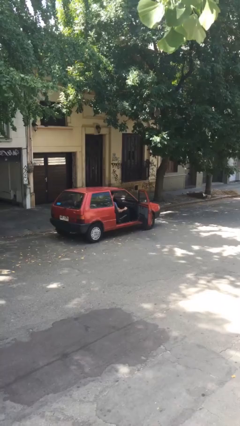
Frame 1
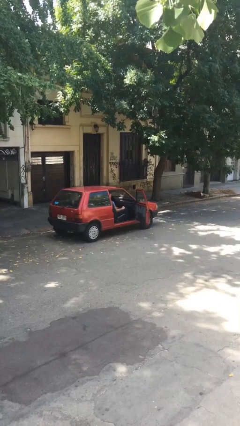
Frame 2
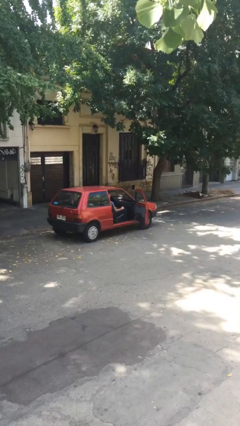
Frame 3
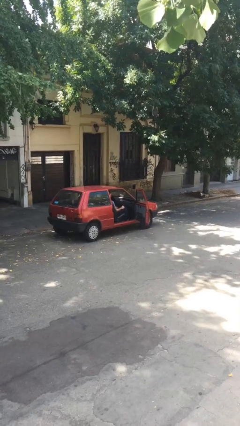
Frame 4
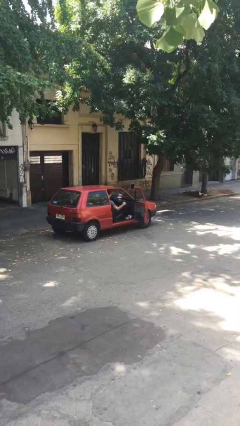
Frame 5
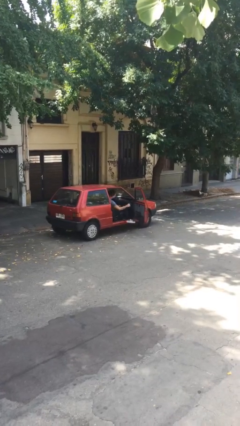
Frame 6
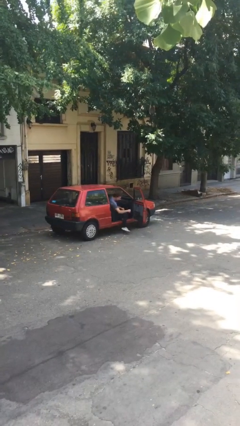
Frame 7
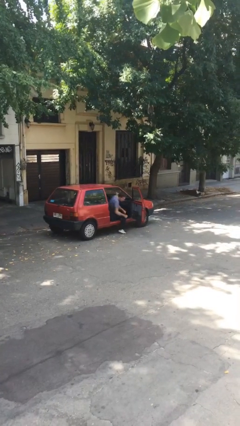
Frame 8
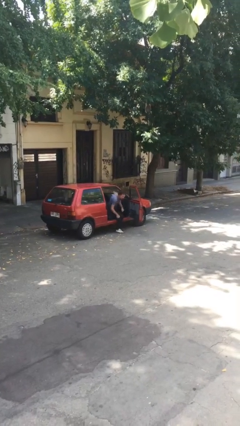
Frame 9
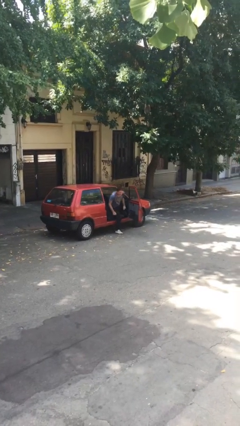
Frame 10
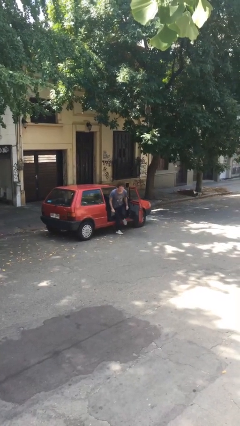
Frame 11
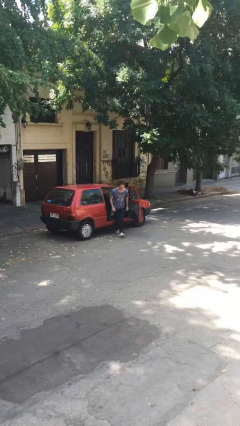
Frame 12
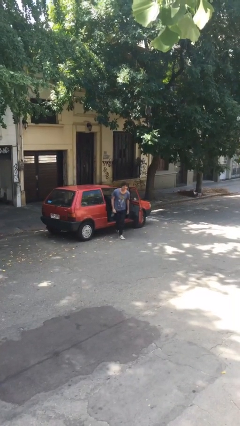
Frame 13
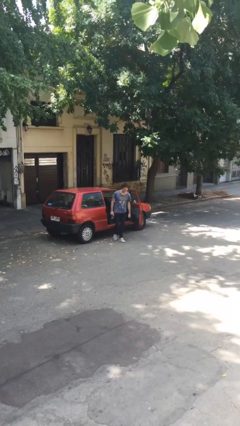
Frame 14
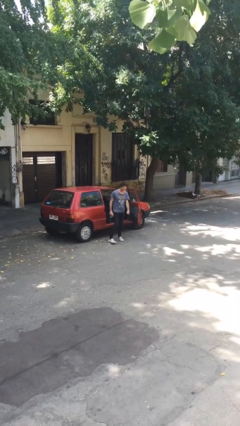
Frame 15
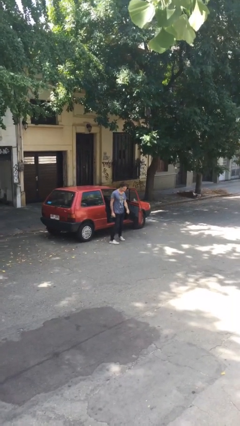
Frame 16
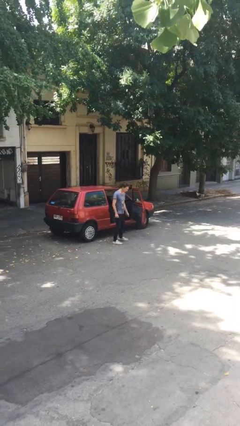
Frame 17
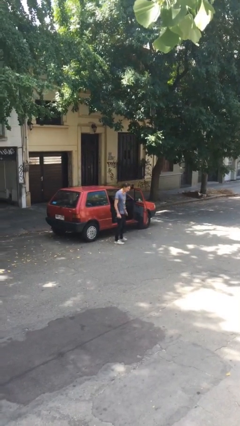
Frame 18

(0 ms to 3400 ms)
person exits car

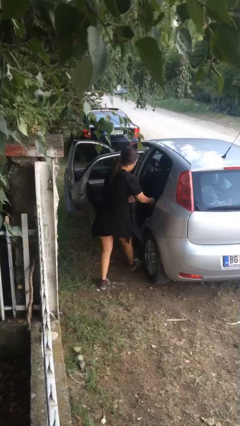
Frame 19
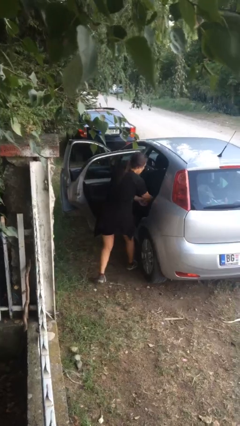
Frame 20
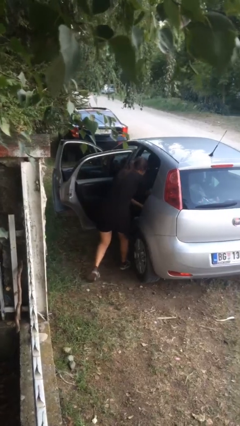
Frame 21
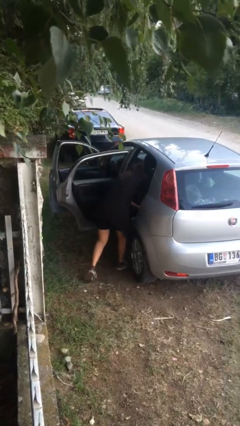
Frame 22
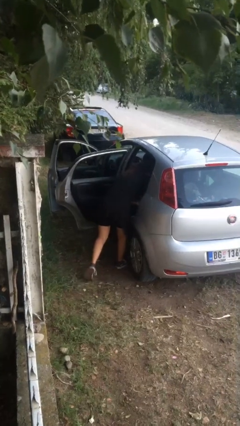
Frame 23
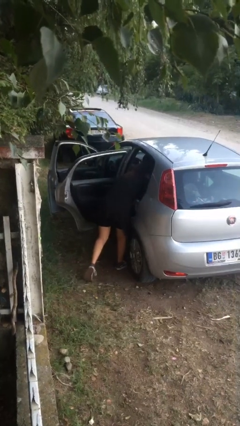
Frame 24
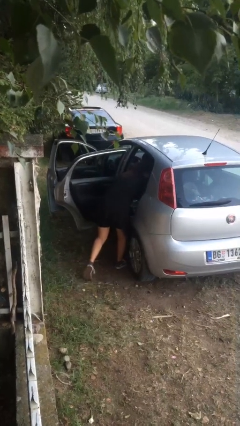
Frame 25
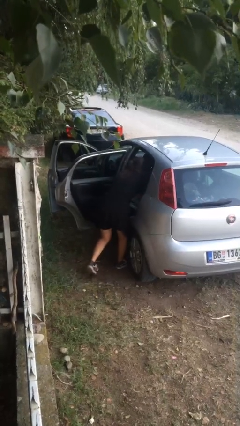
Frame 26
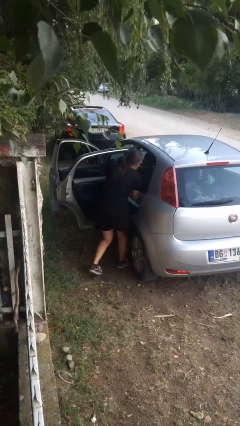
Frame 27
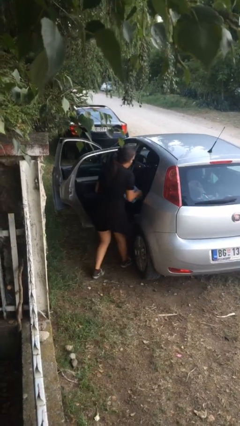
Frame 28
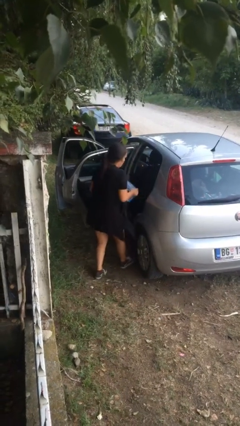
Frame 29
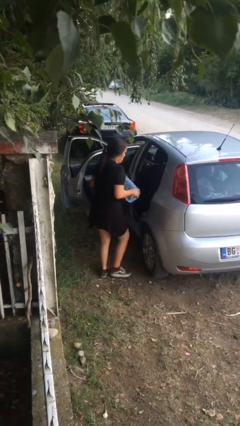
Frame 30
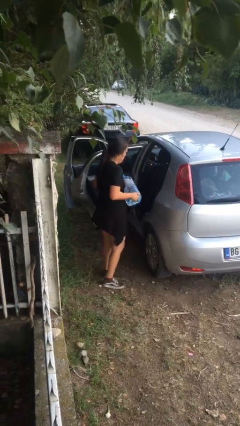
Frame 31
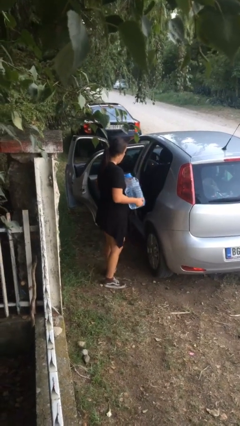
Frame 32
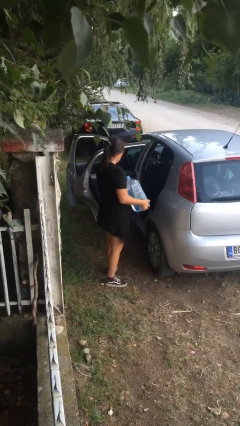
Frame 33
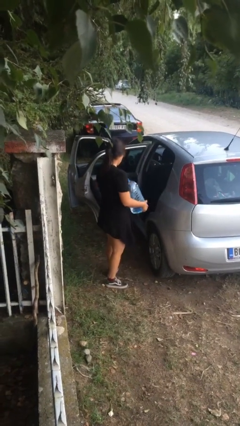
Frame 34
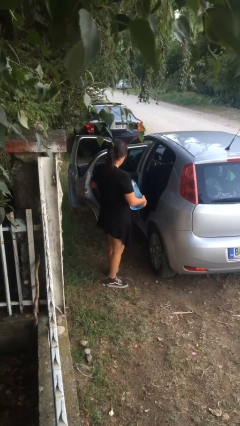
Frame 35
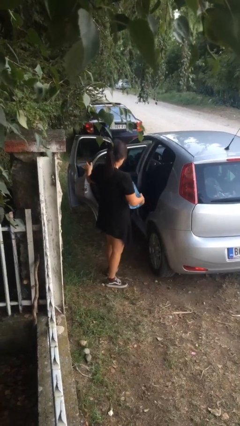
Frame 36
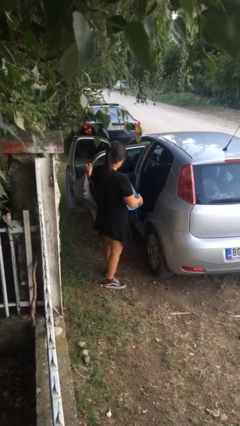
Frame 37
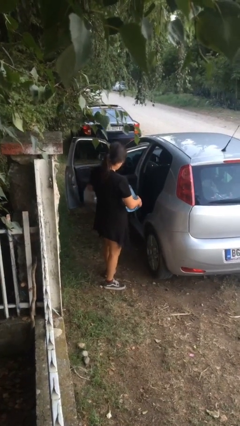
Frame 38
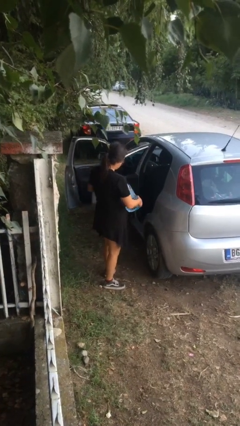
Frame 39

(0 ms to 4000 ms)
person unloads car

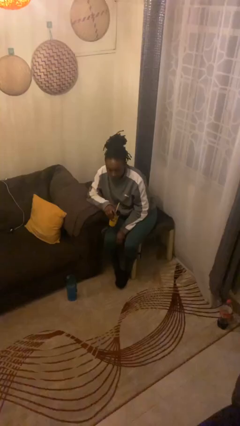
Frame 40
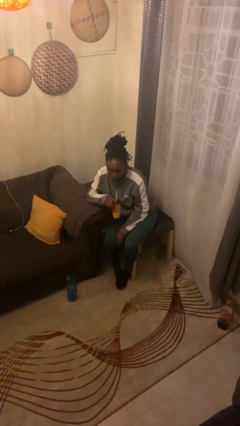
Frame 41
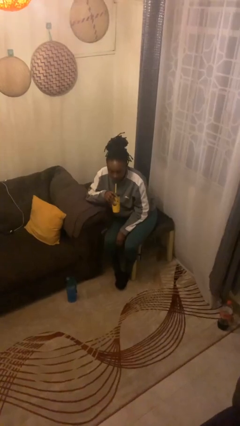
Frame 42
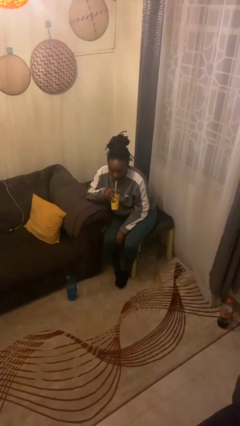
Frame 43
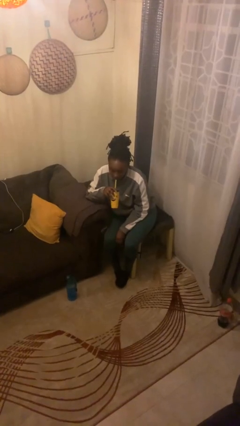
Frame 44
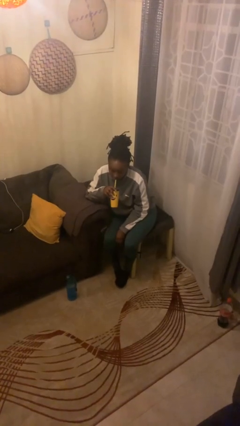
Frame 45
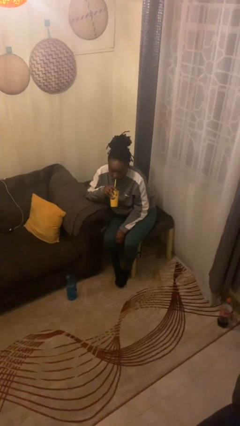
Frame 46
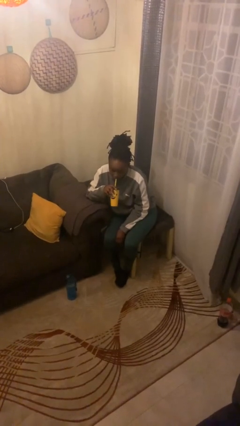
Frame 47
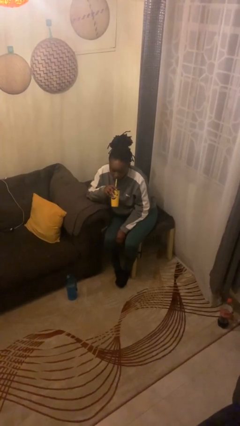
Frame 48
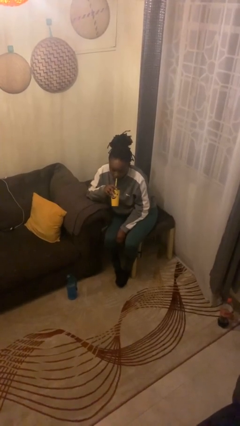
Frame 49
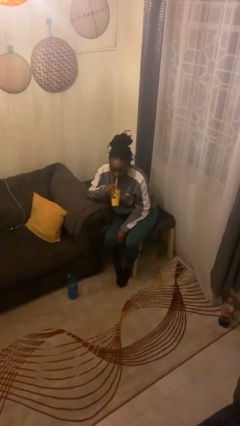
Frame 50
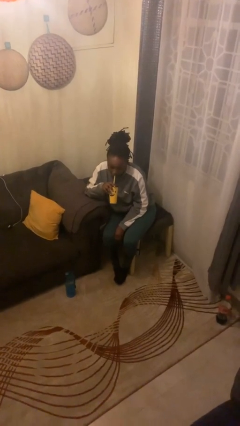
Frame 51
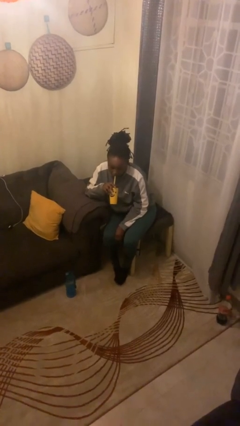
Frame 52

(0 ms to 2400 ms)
person drinks from straw

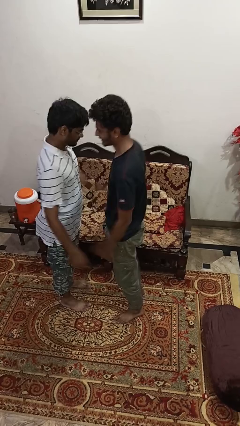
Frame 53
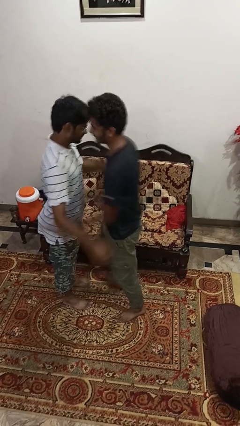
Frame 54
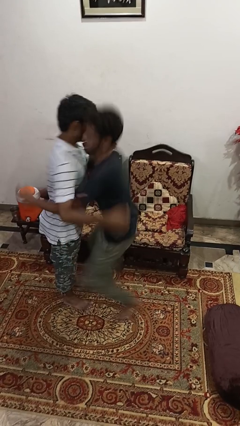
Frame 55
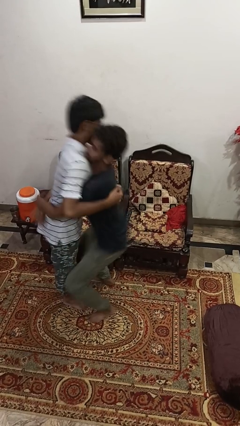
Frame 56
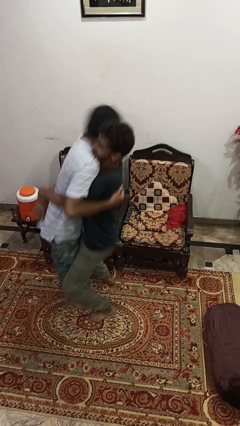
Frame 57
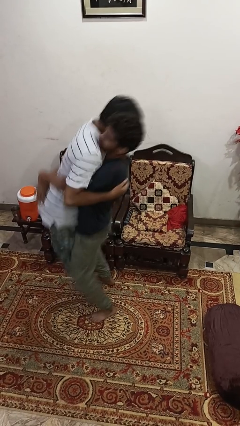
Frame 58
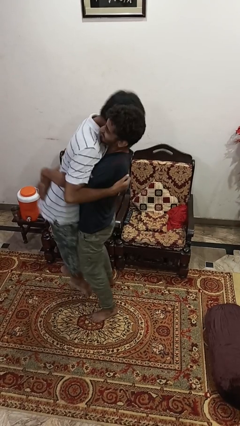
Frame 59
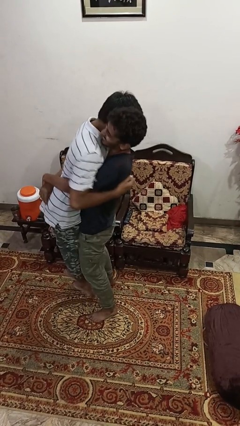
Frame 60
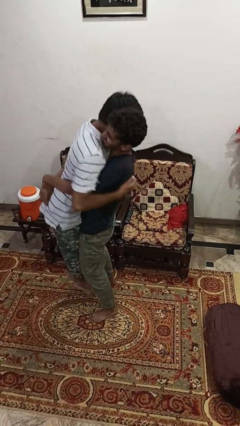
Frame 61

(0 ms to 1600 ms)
person picks up person

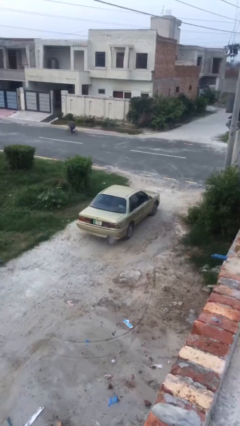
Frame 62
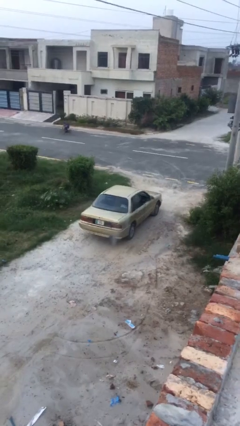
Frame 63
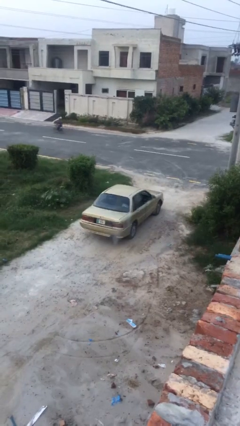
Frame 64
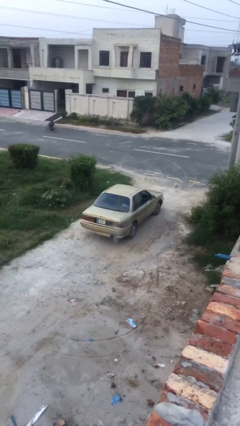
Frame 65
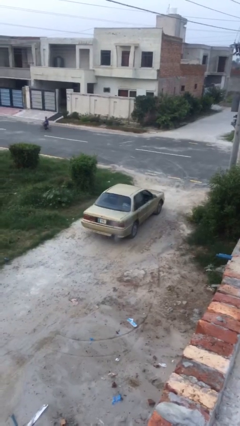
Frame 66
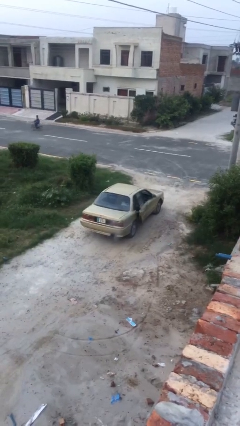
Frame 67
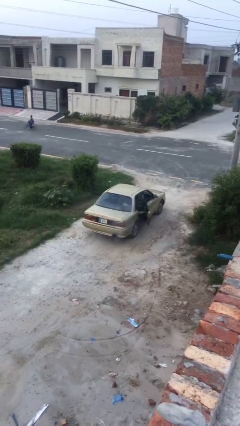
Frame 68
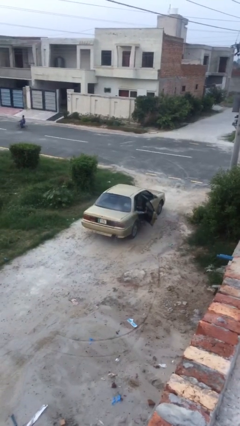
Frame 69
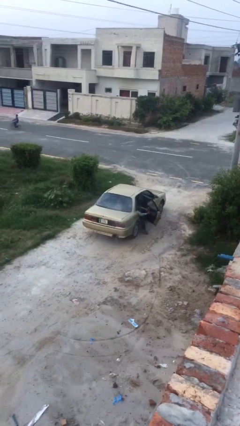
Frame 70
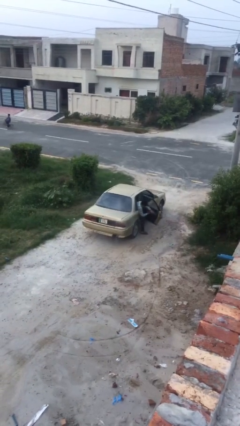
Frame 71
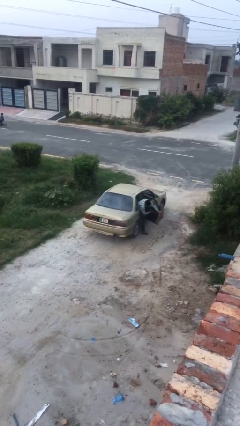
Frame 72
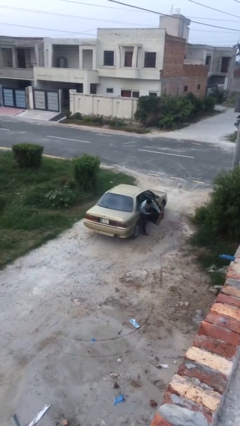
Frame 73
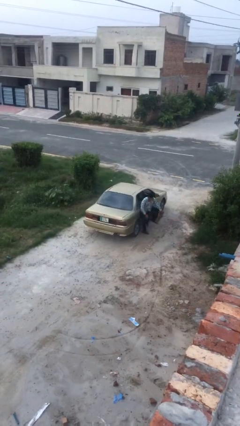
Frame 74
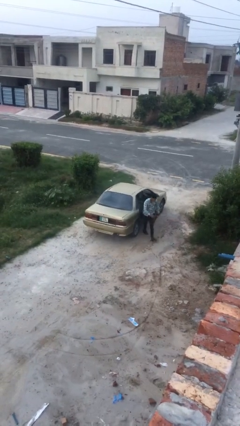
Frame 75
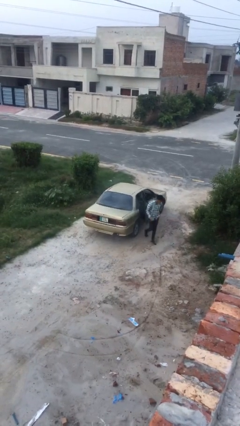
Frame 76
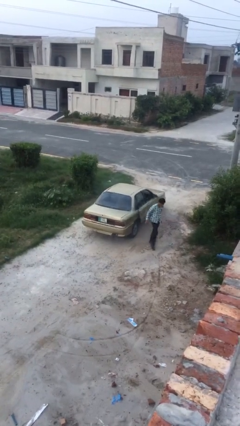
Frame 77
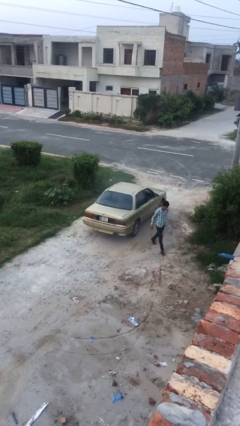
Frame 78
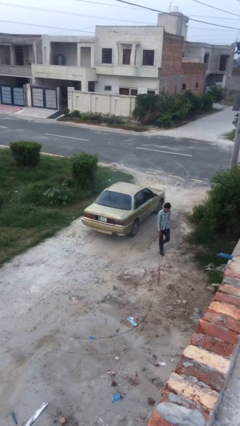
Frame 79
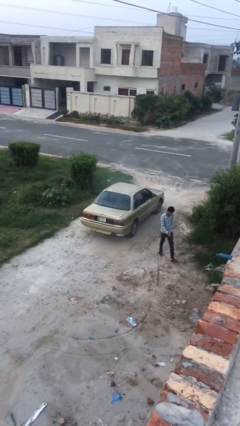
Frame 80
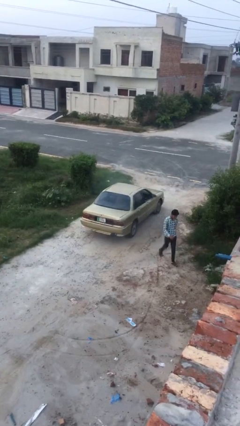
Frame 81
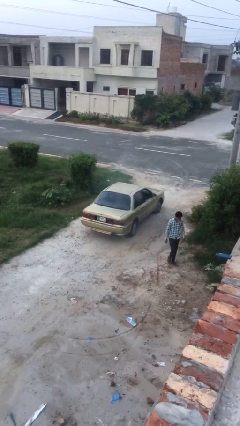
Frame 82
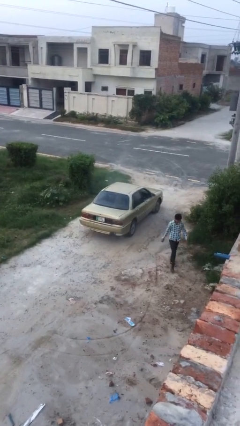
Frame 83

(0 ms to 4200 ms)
car drops off person

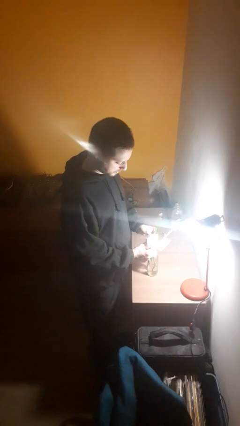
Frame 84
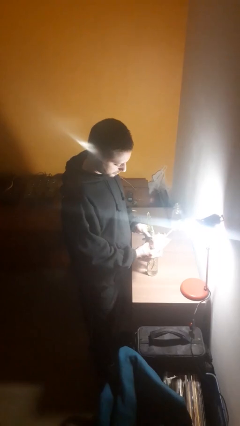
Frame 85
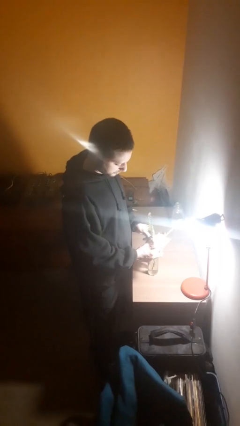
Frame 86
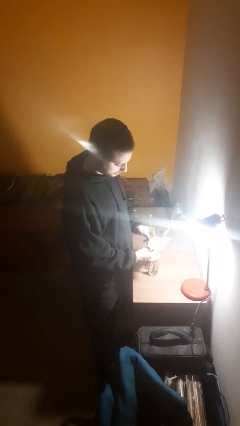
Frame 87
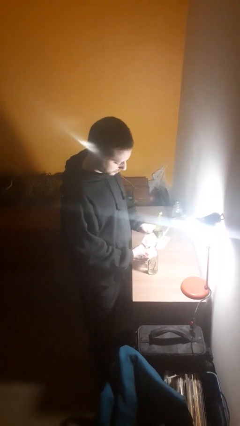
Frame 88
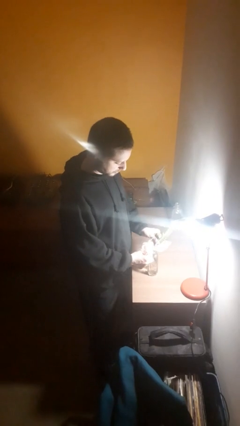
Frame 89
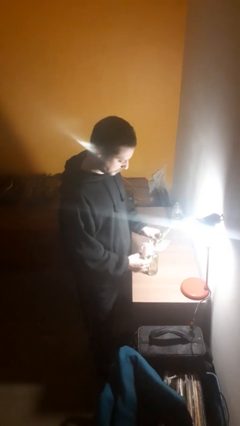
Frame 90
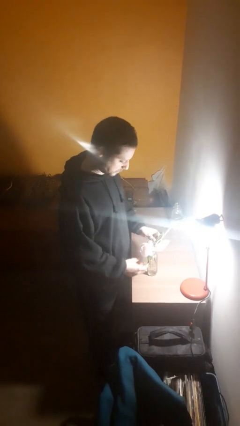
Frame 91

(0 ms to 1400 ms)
person arranges flowers in vase

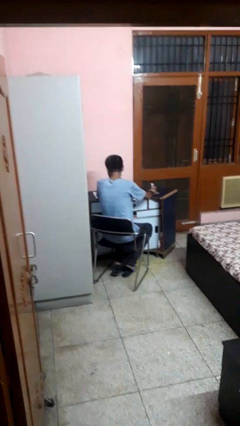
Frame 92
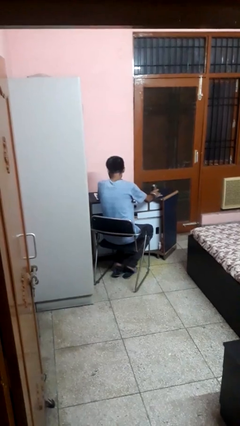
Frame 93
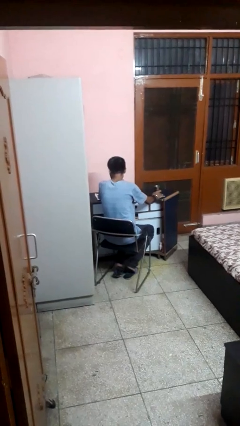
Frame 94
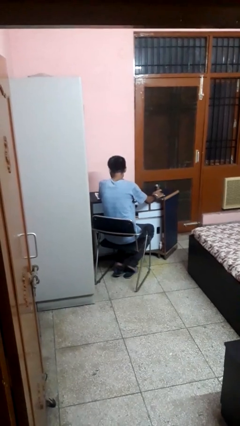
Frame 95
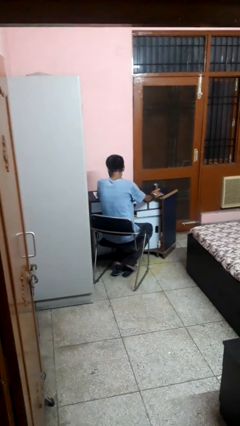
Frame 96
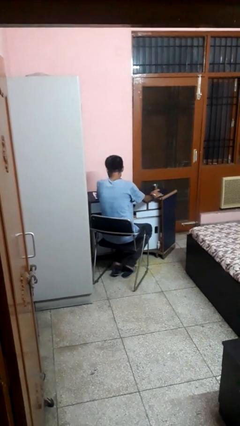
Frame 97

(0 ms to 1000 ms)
person sets upright glass
